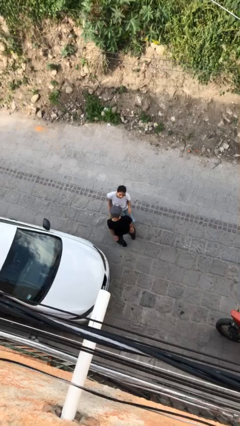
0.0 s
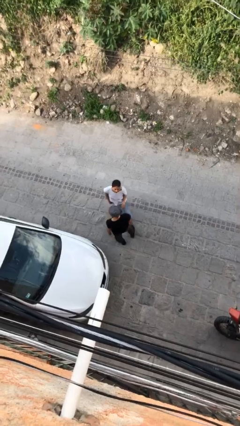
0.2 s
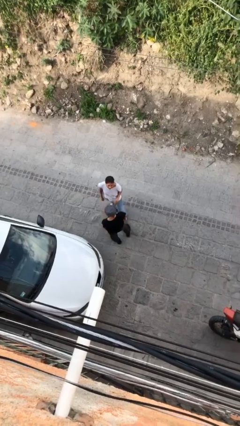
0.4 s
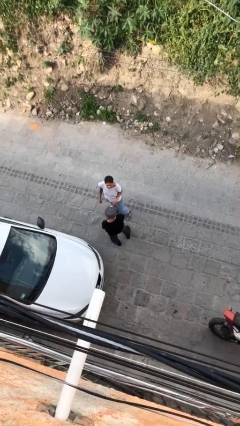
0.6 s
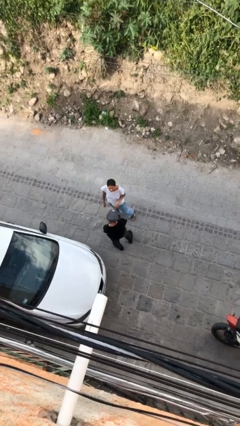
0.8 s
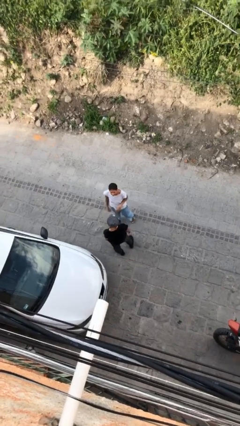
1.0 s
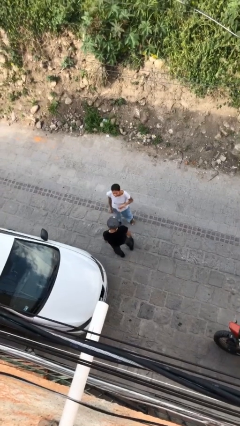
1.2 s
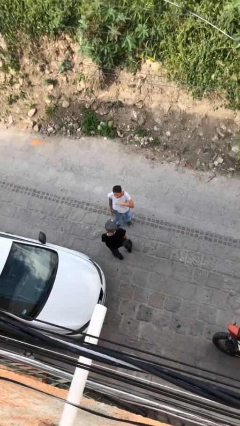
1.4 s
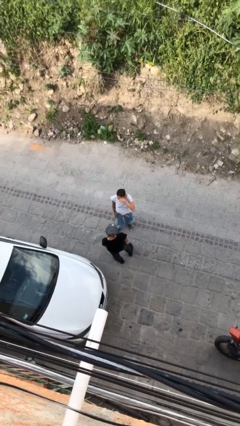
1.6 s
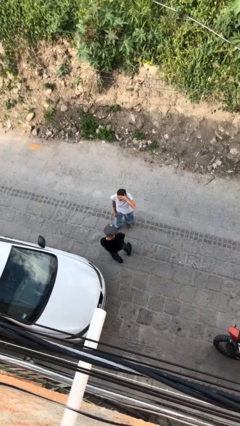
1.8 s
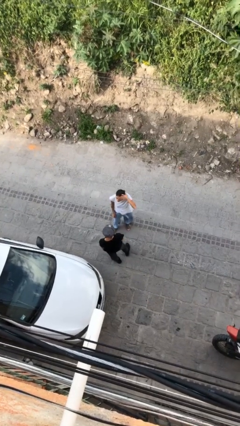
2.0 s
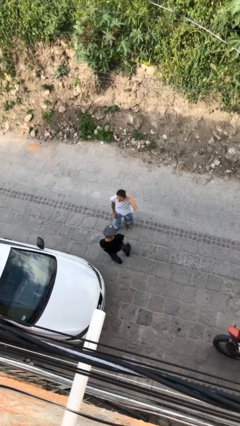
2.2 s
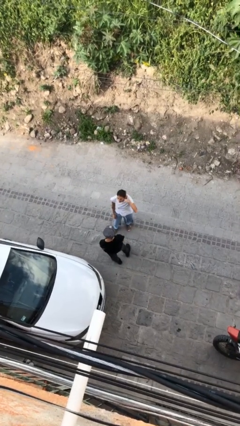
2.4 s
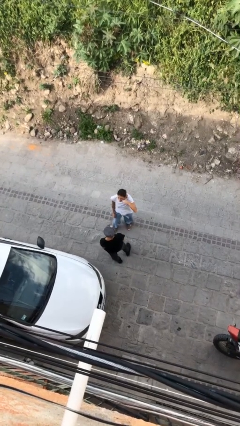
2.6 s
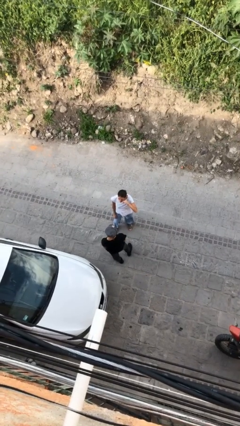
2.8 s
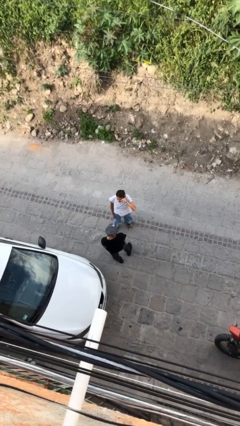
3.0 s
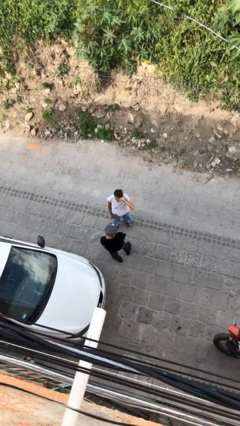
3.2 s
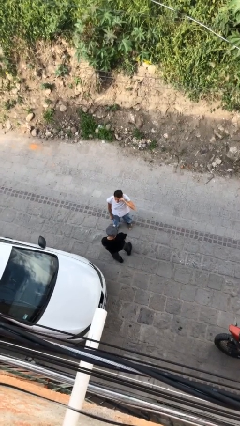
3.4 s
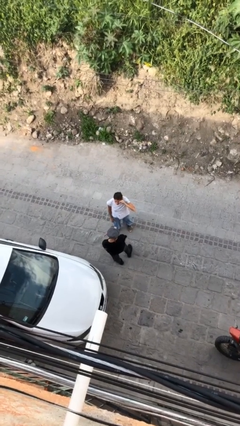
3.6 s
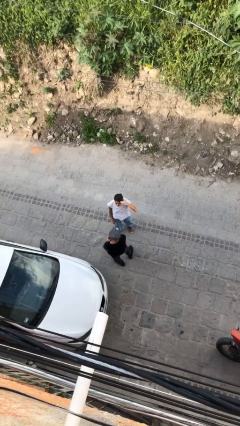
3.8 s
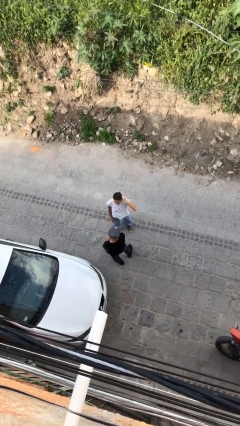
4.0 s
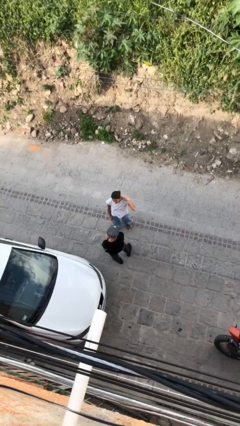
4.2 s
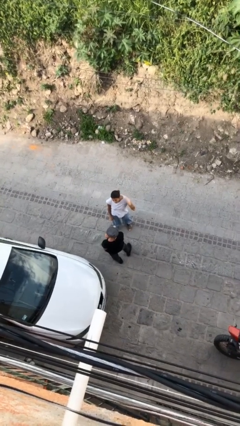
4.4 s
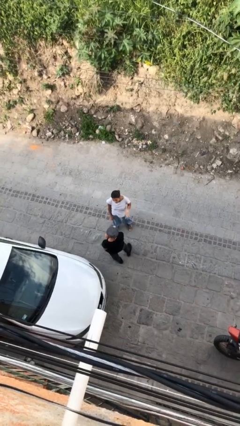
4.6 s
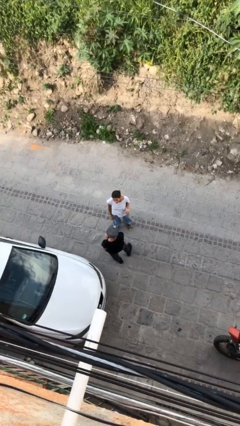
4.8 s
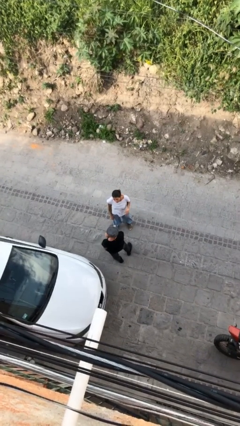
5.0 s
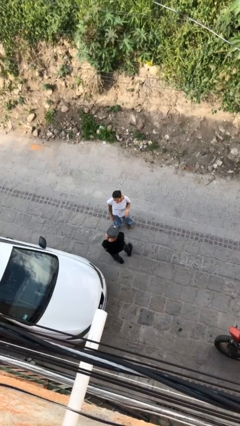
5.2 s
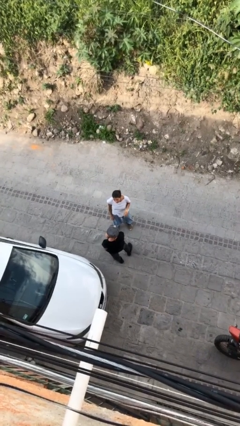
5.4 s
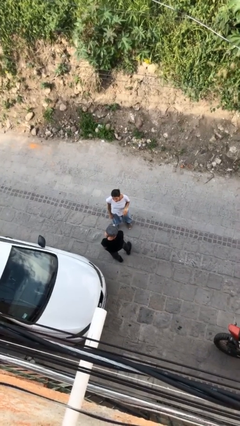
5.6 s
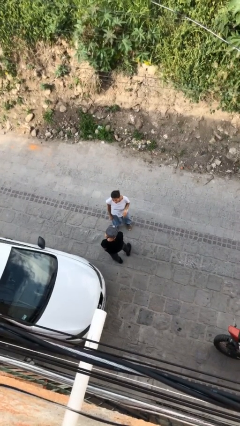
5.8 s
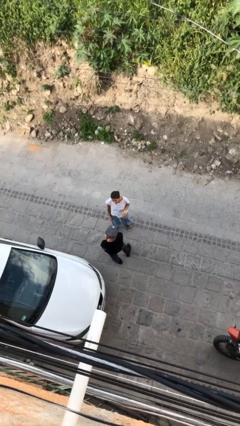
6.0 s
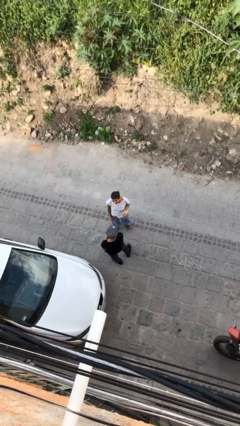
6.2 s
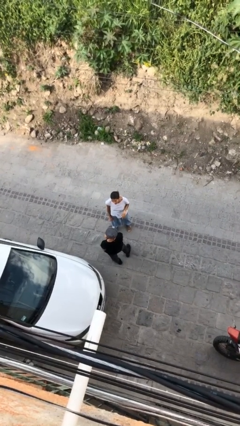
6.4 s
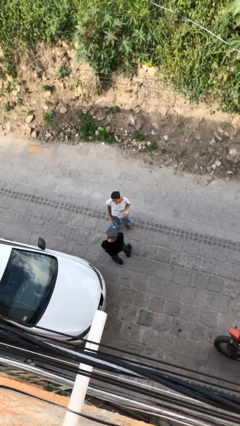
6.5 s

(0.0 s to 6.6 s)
person talks to person

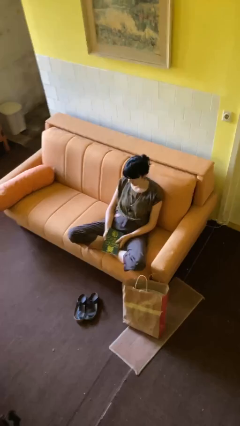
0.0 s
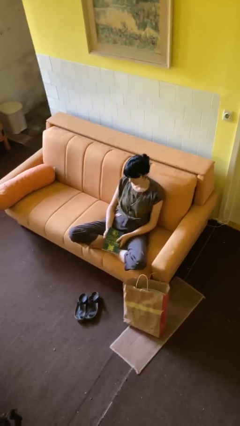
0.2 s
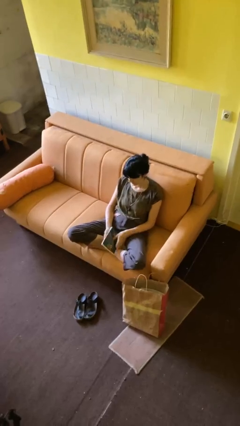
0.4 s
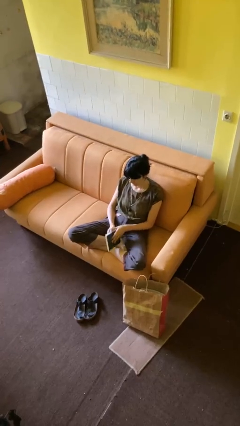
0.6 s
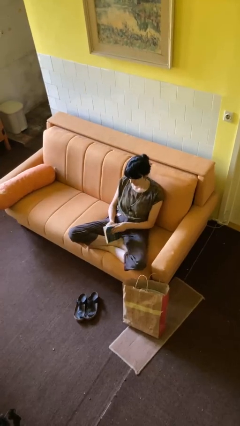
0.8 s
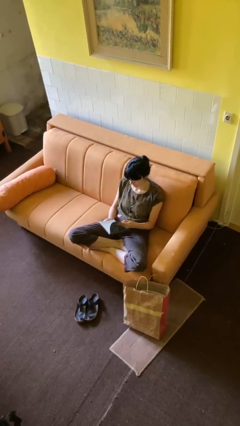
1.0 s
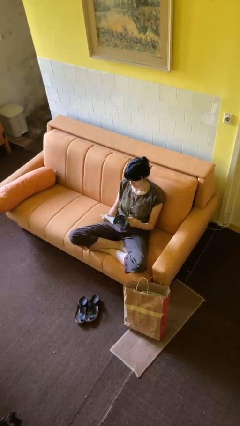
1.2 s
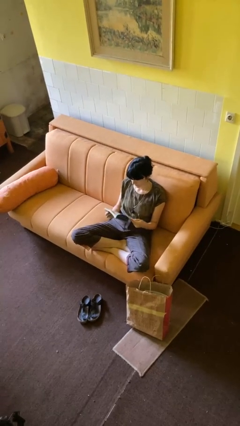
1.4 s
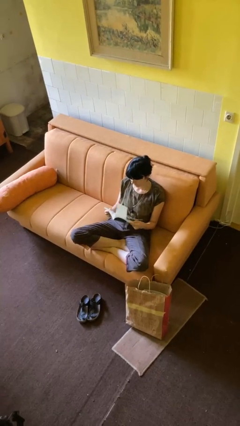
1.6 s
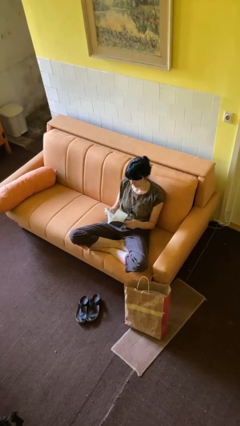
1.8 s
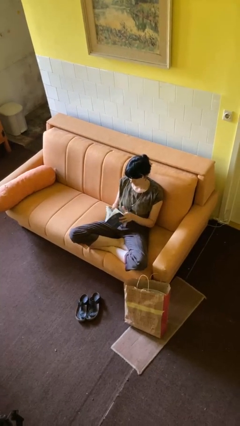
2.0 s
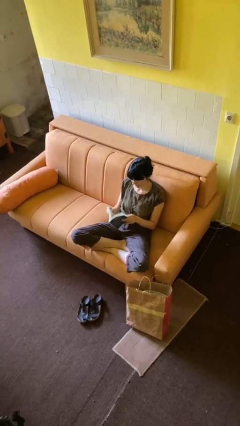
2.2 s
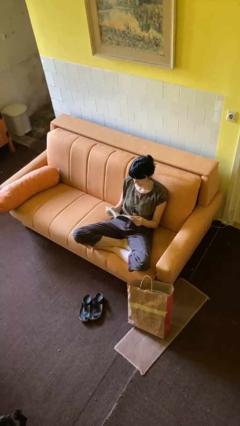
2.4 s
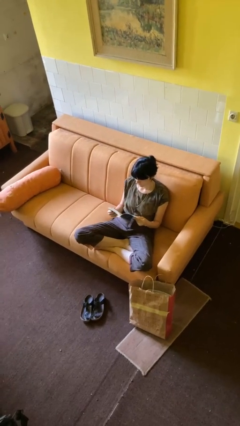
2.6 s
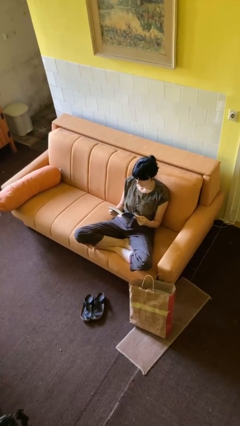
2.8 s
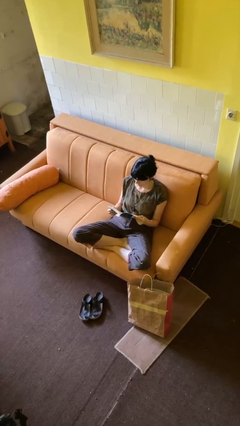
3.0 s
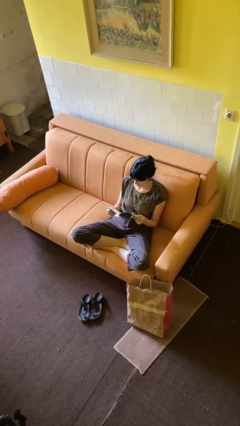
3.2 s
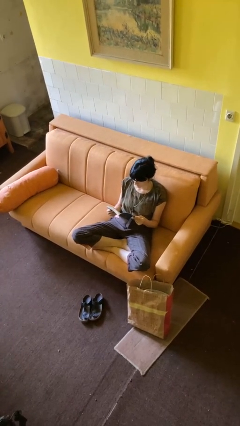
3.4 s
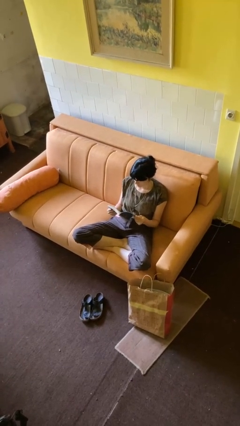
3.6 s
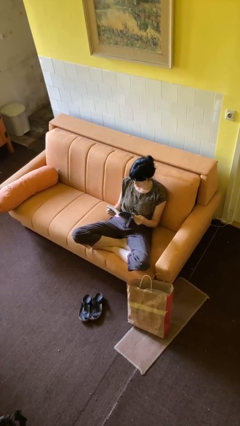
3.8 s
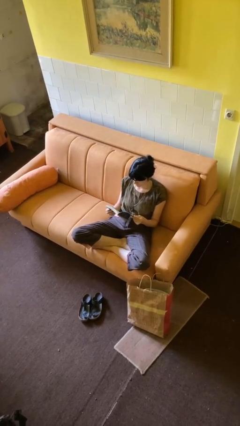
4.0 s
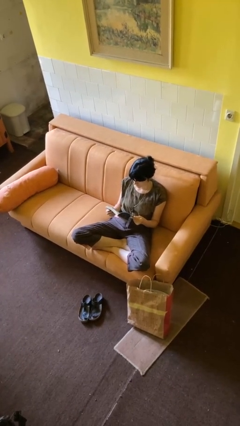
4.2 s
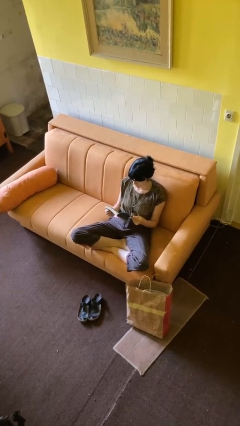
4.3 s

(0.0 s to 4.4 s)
person reads book

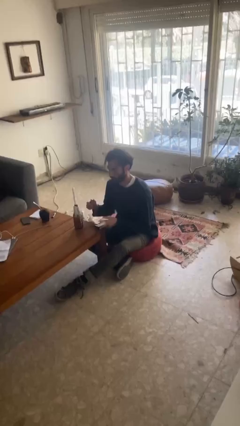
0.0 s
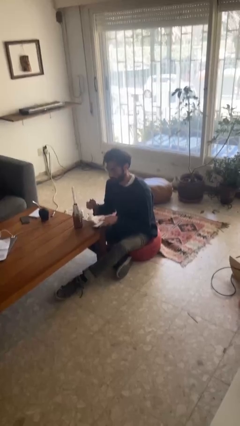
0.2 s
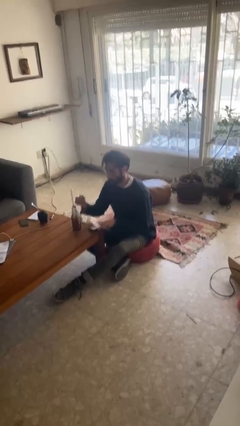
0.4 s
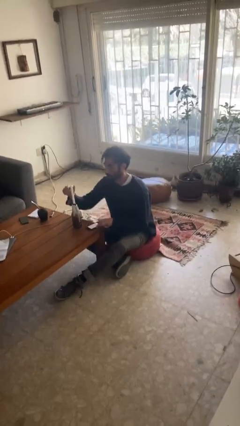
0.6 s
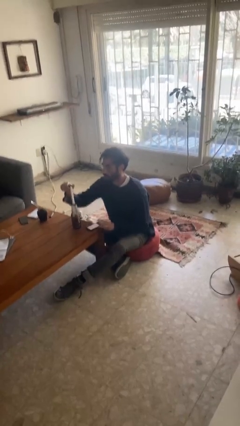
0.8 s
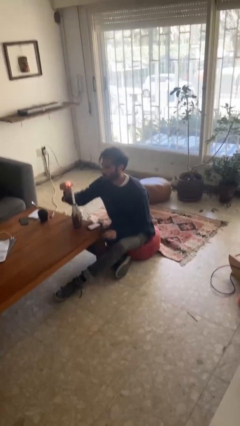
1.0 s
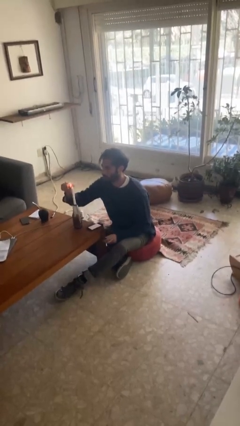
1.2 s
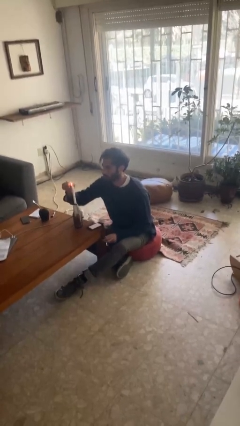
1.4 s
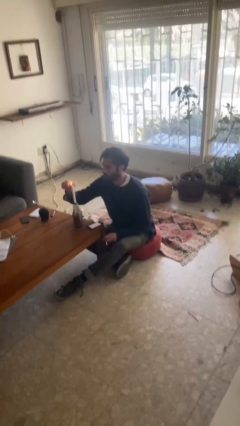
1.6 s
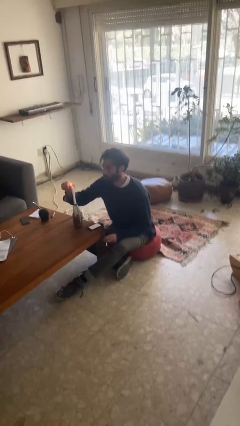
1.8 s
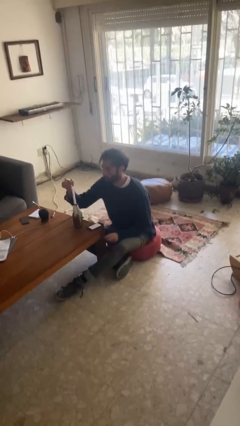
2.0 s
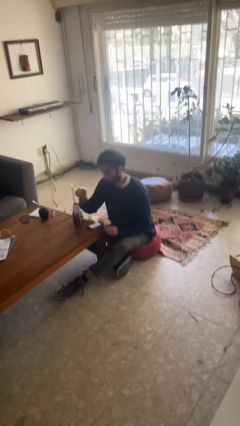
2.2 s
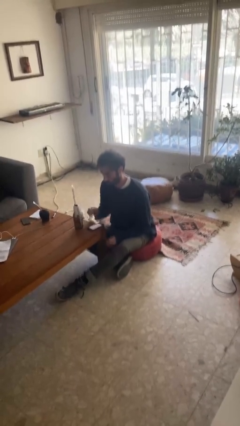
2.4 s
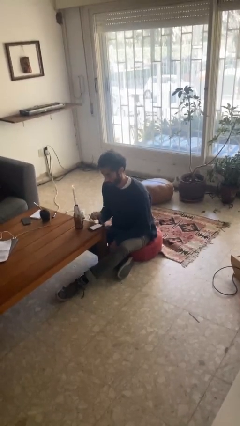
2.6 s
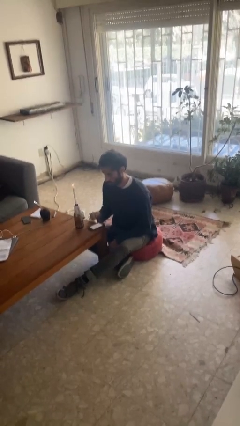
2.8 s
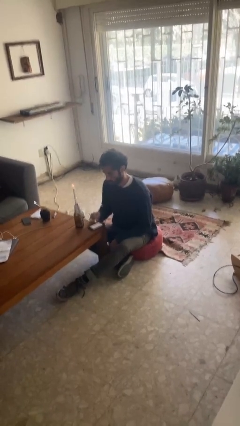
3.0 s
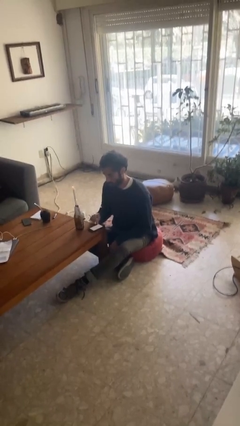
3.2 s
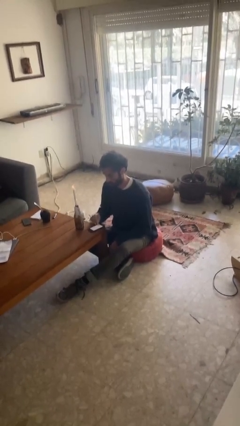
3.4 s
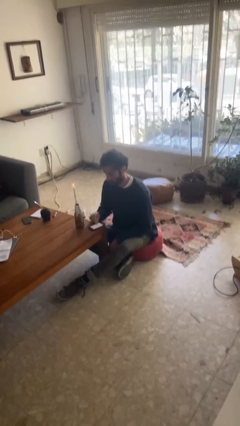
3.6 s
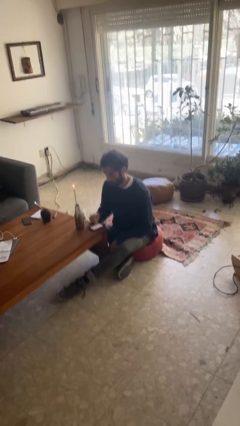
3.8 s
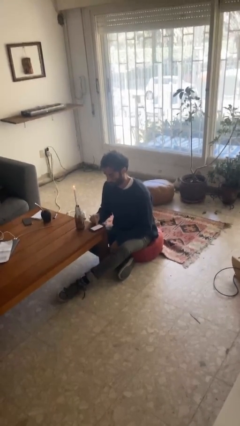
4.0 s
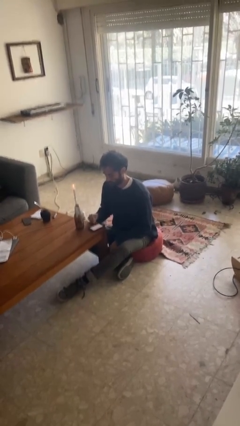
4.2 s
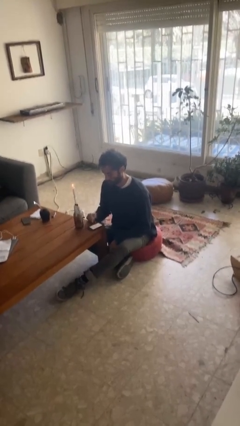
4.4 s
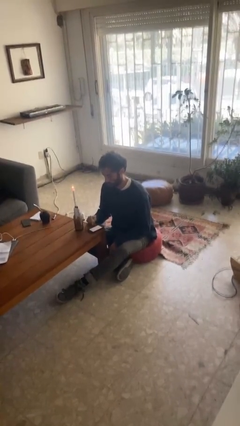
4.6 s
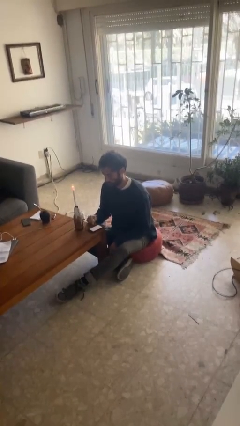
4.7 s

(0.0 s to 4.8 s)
person lights candle

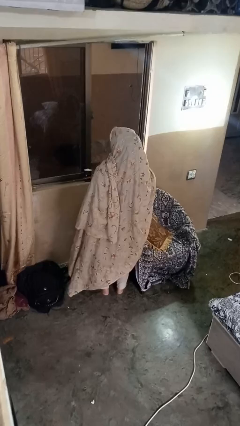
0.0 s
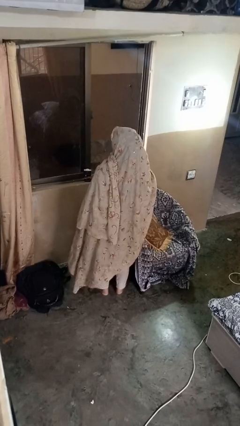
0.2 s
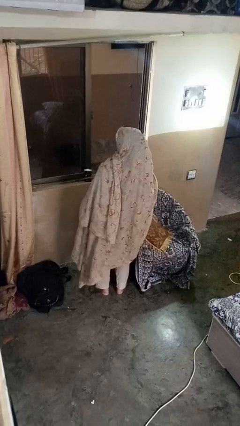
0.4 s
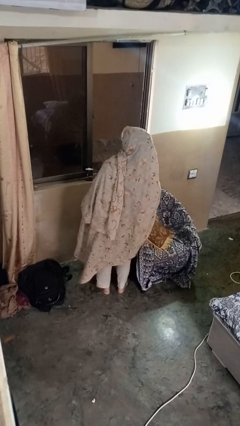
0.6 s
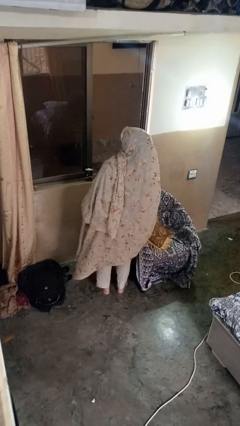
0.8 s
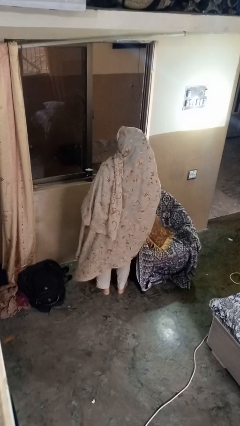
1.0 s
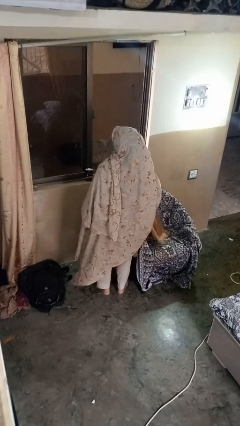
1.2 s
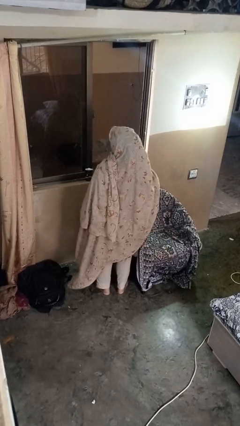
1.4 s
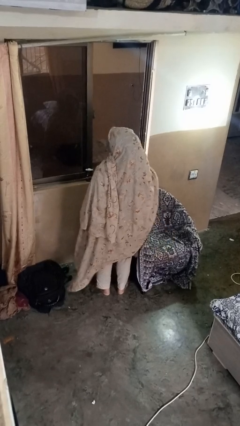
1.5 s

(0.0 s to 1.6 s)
person picks up object from couch

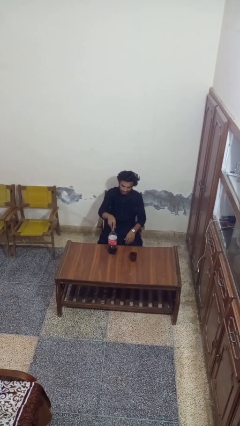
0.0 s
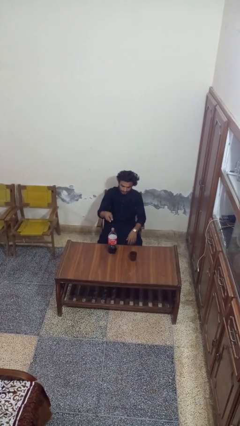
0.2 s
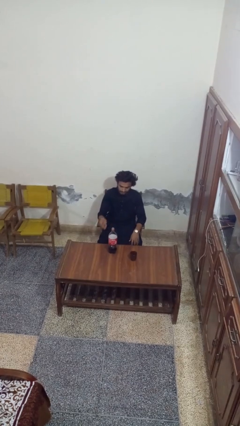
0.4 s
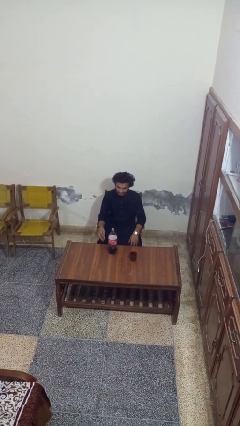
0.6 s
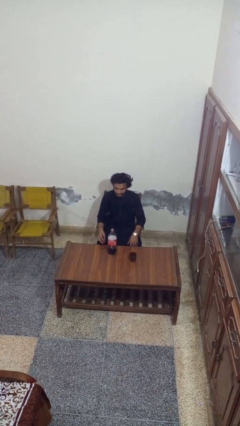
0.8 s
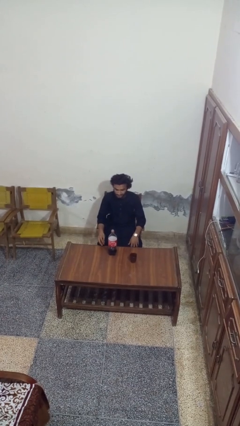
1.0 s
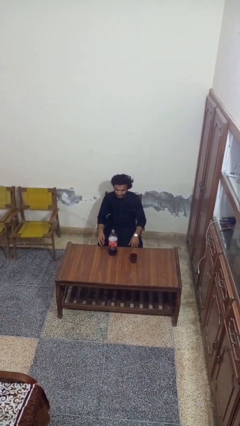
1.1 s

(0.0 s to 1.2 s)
person unscrews lid from bottle
